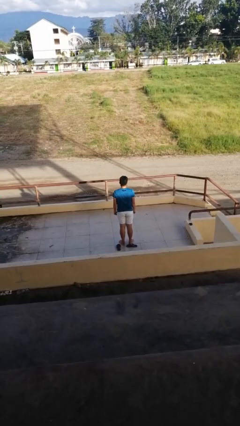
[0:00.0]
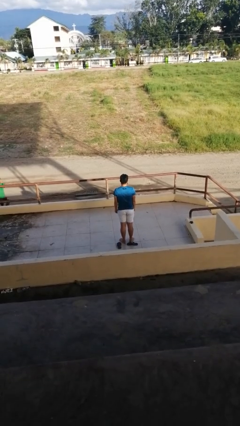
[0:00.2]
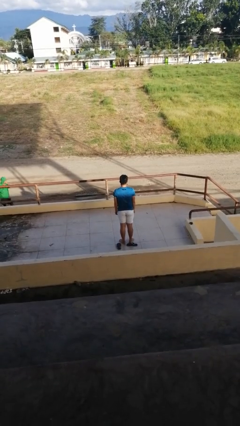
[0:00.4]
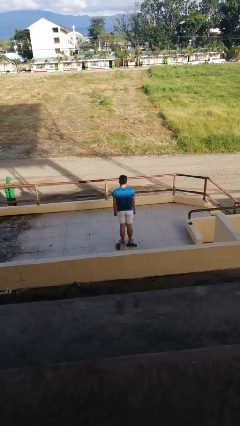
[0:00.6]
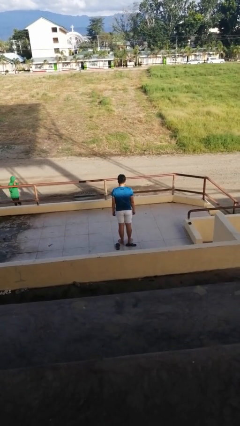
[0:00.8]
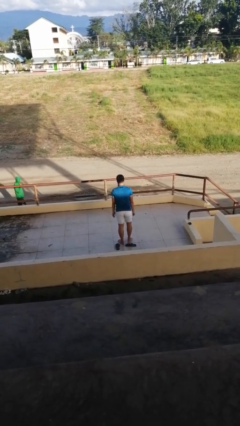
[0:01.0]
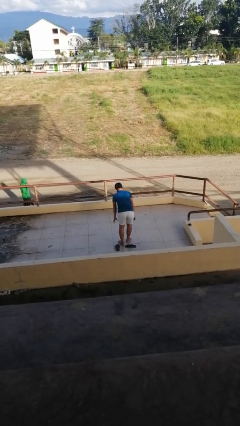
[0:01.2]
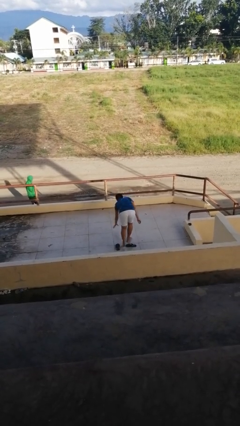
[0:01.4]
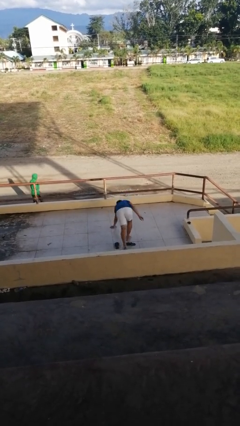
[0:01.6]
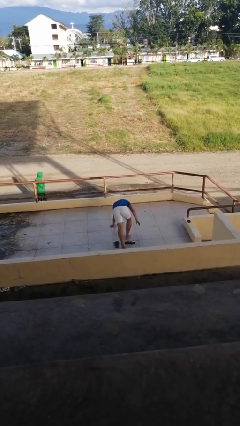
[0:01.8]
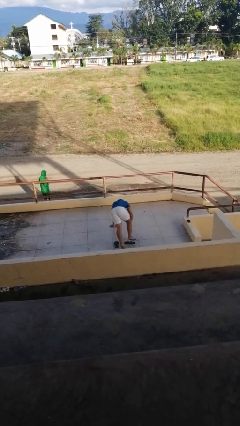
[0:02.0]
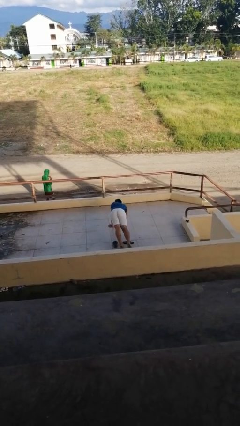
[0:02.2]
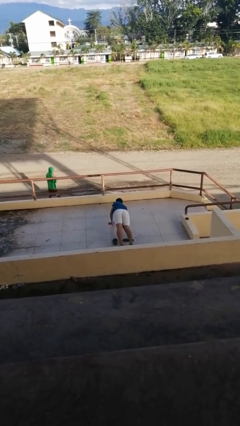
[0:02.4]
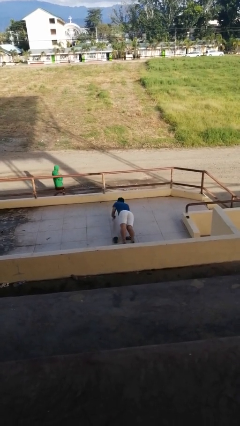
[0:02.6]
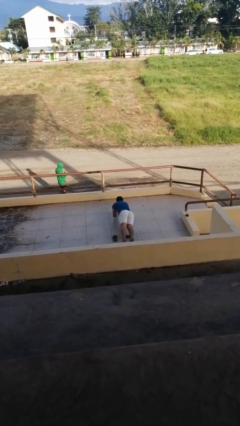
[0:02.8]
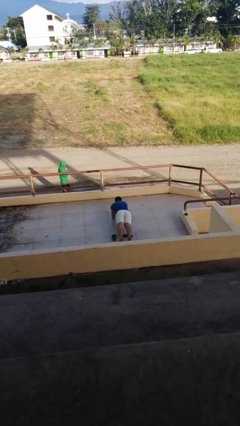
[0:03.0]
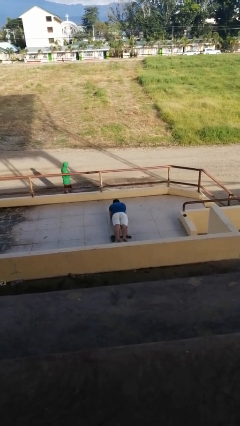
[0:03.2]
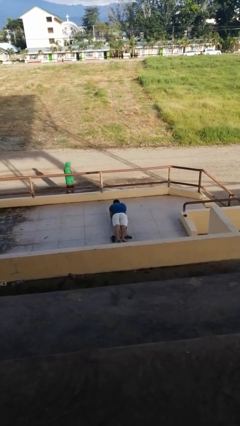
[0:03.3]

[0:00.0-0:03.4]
person exercises with plank

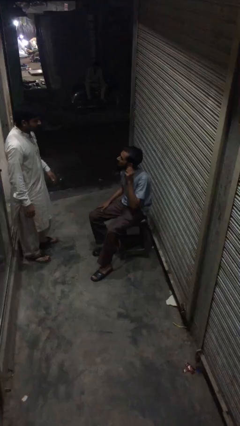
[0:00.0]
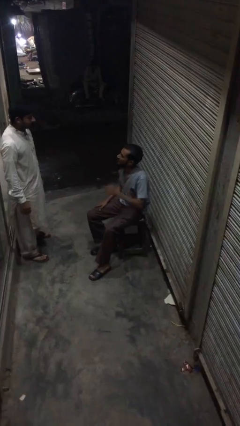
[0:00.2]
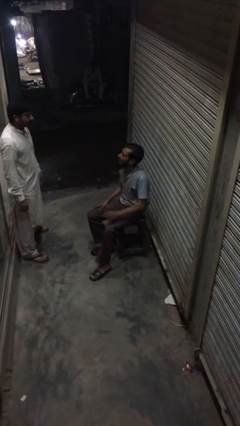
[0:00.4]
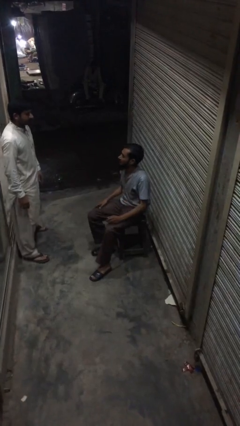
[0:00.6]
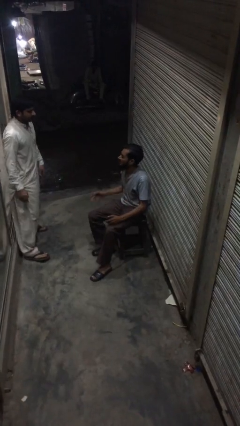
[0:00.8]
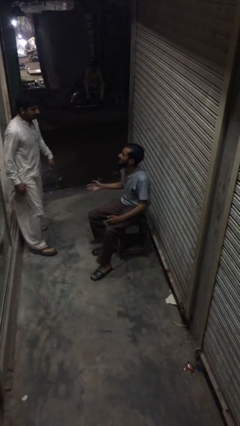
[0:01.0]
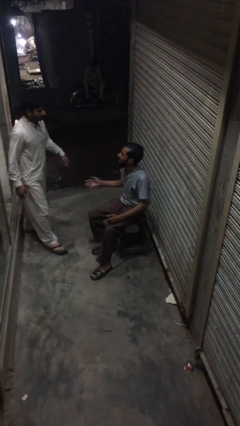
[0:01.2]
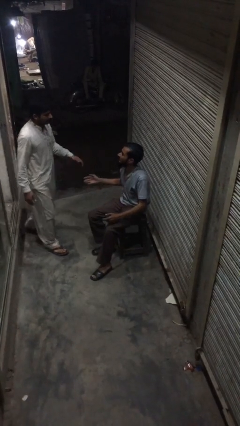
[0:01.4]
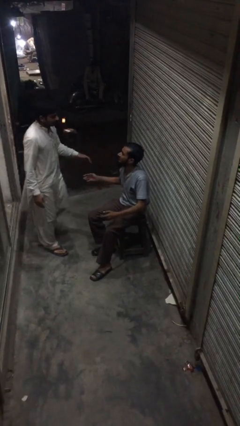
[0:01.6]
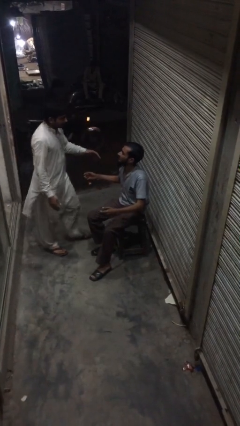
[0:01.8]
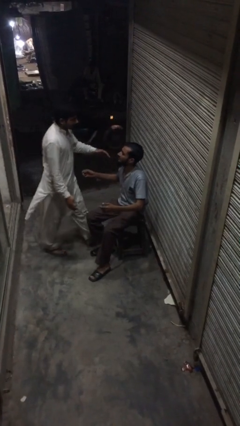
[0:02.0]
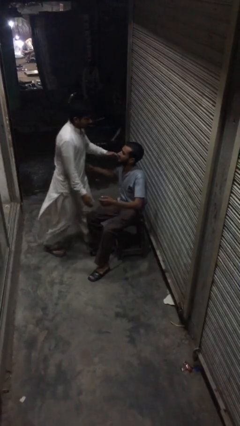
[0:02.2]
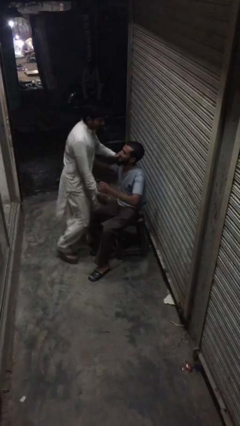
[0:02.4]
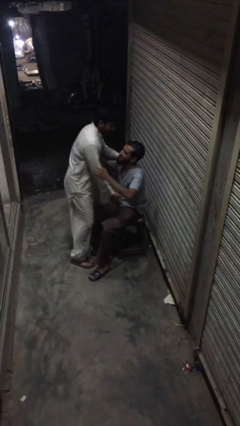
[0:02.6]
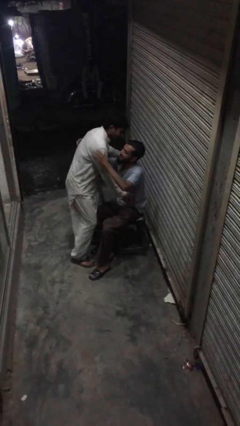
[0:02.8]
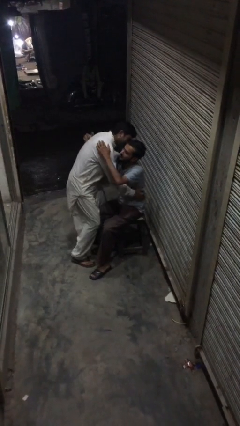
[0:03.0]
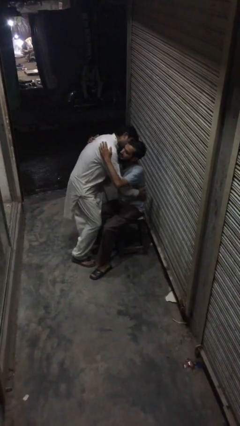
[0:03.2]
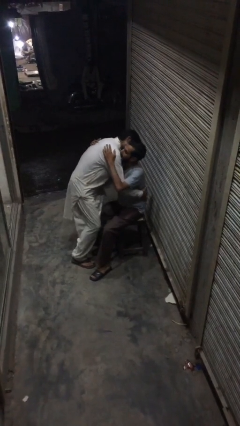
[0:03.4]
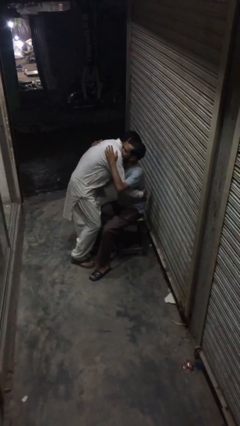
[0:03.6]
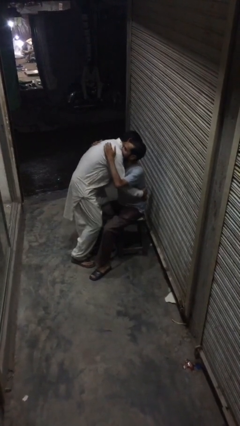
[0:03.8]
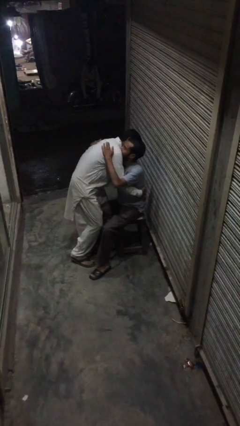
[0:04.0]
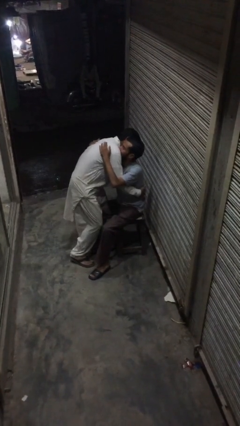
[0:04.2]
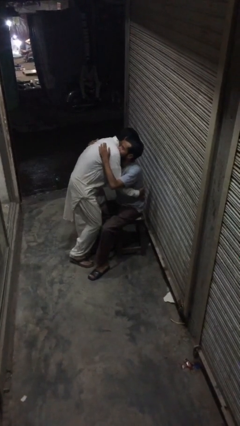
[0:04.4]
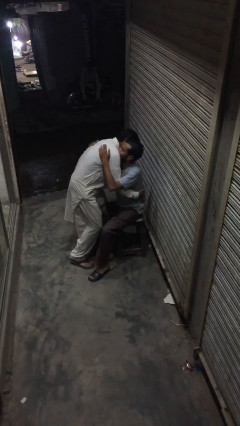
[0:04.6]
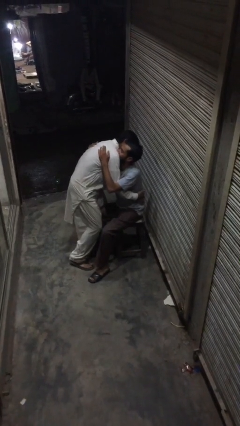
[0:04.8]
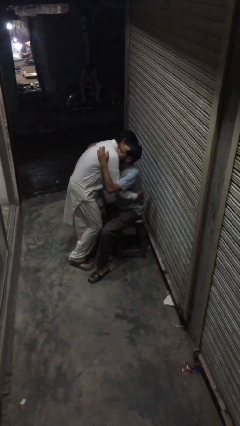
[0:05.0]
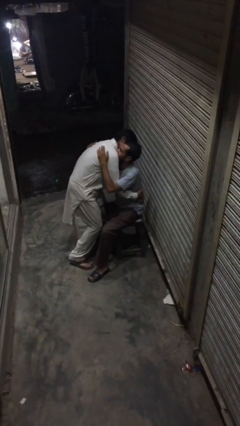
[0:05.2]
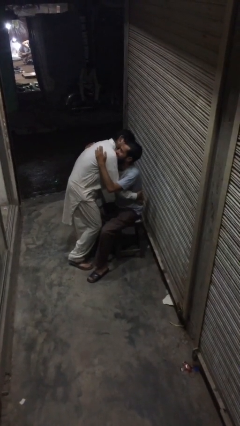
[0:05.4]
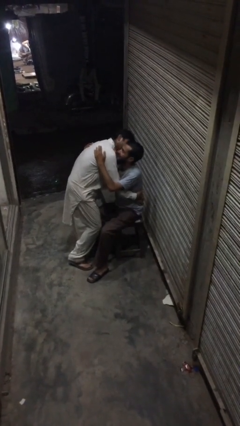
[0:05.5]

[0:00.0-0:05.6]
person embraces person

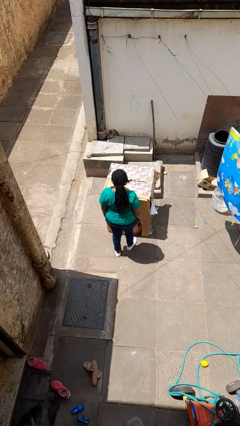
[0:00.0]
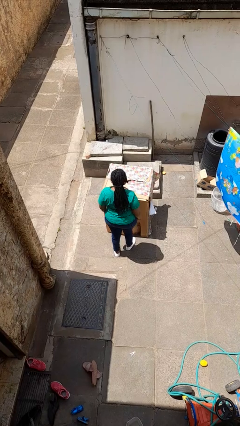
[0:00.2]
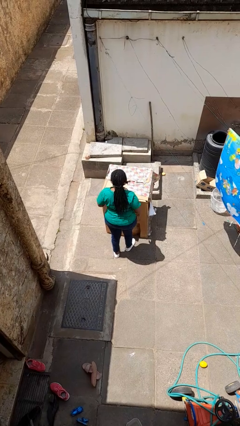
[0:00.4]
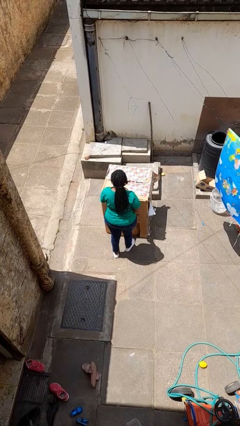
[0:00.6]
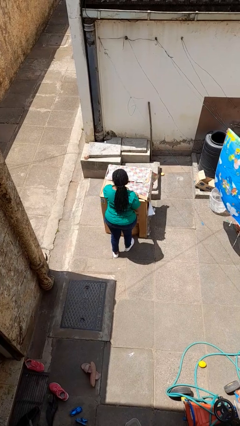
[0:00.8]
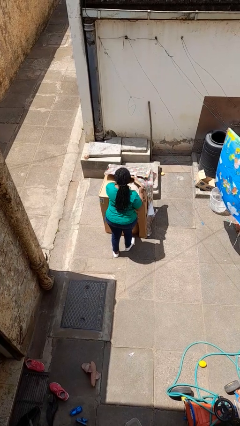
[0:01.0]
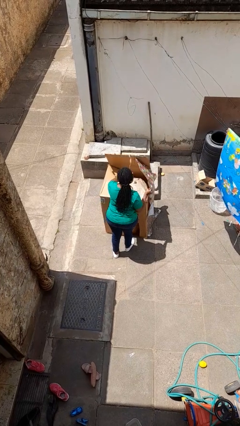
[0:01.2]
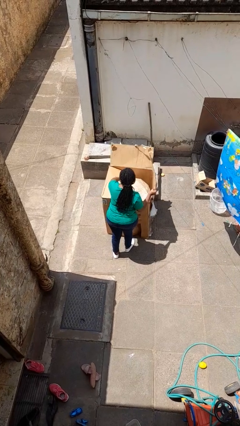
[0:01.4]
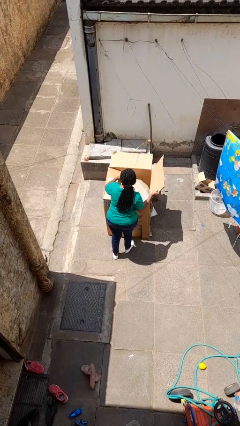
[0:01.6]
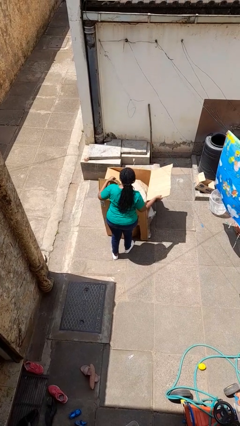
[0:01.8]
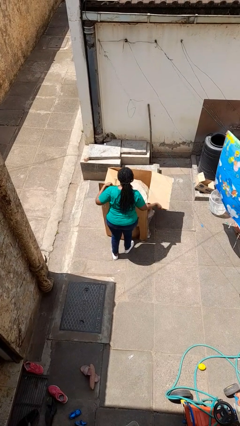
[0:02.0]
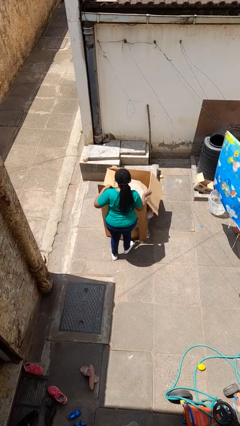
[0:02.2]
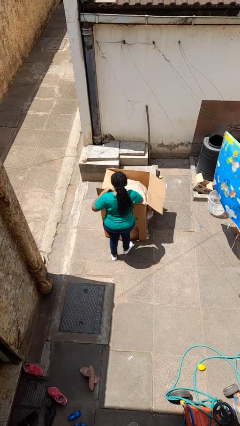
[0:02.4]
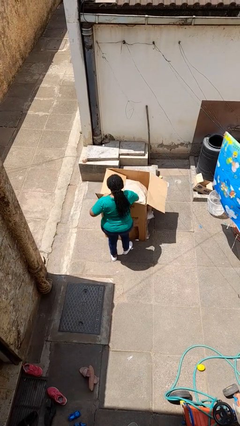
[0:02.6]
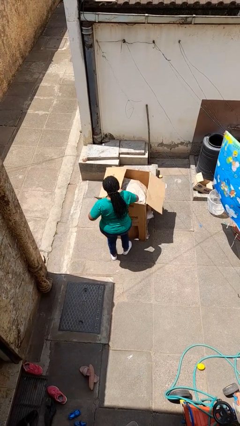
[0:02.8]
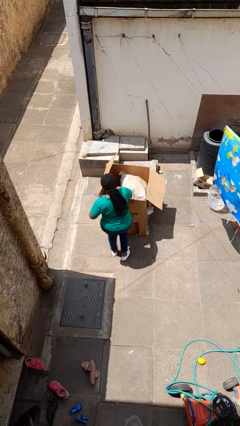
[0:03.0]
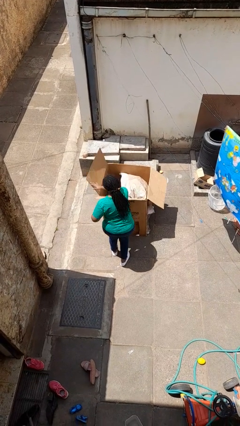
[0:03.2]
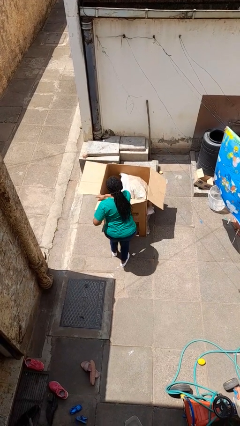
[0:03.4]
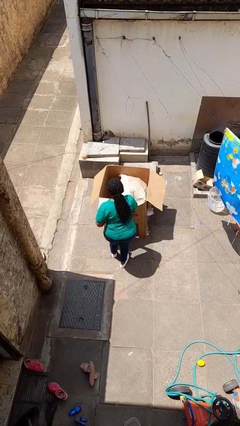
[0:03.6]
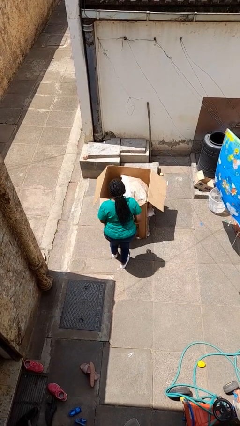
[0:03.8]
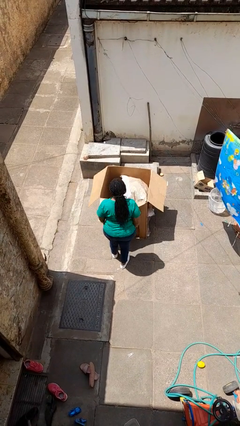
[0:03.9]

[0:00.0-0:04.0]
person opens box

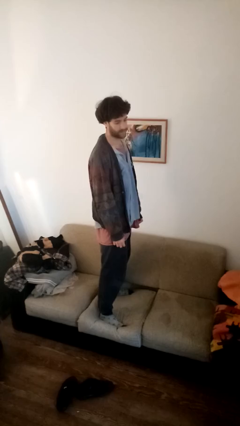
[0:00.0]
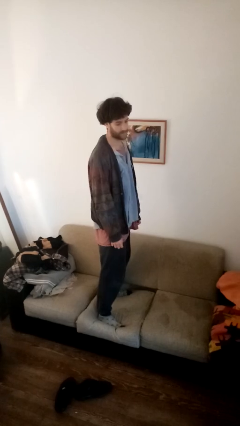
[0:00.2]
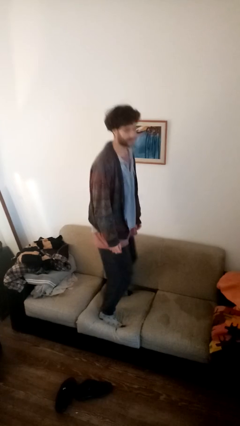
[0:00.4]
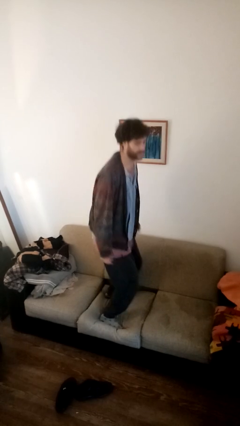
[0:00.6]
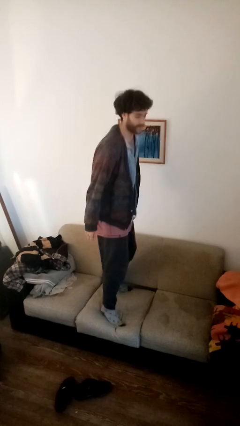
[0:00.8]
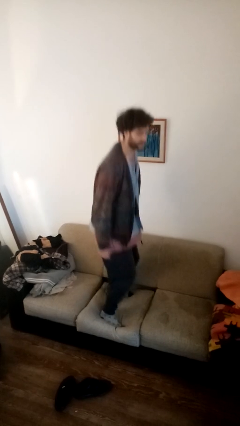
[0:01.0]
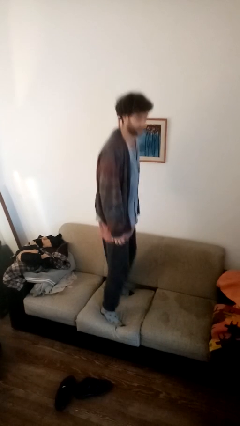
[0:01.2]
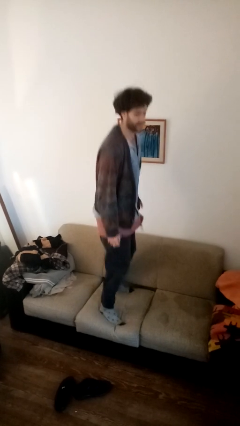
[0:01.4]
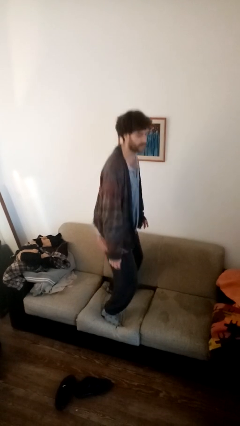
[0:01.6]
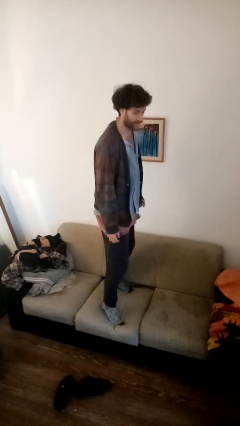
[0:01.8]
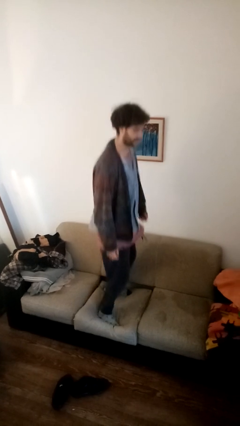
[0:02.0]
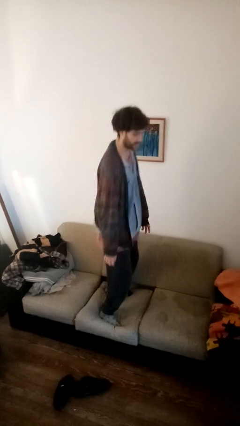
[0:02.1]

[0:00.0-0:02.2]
person jumps on couch

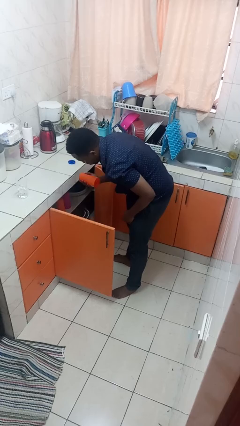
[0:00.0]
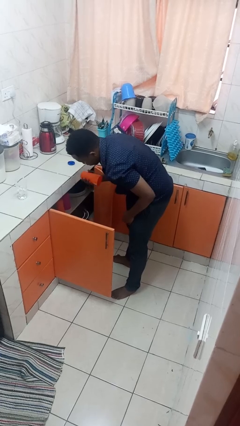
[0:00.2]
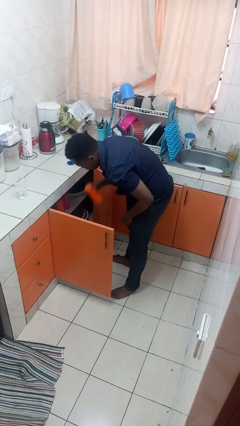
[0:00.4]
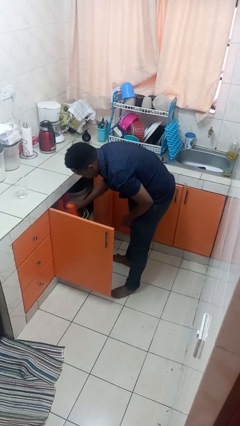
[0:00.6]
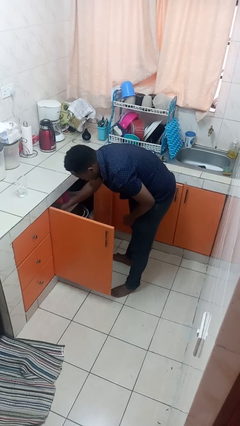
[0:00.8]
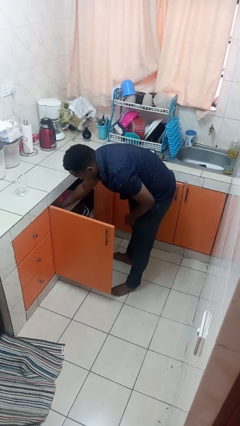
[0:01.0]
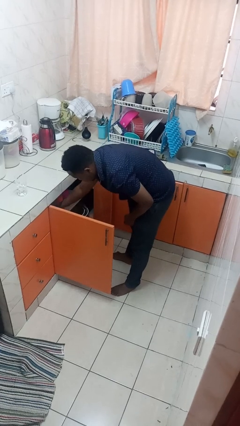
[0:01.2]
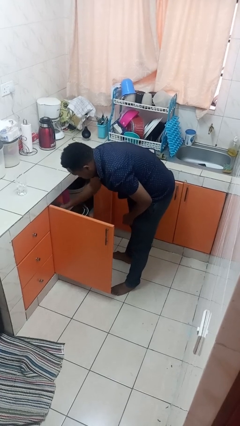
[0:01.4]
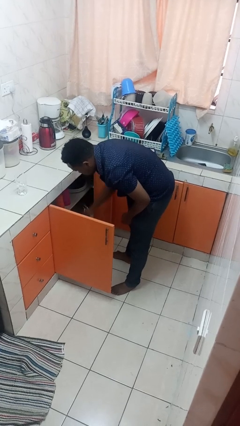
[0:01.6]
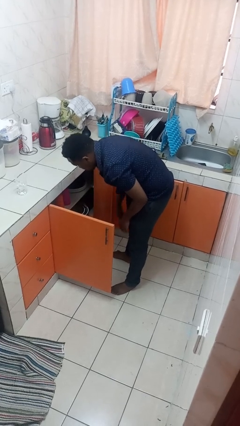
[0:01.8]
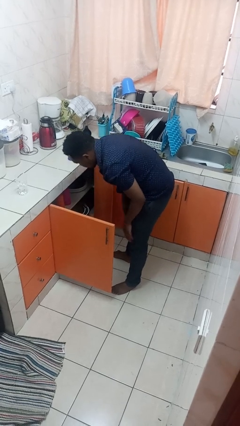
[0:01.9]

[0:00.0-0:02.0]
person puts object in cabinet

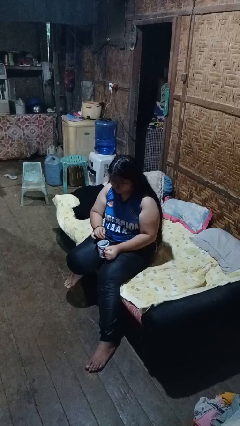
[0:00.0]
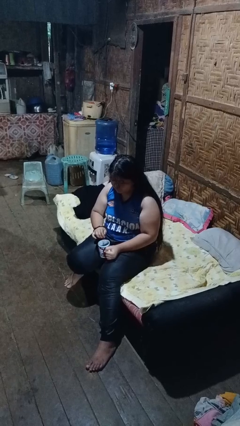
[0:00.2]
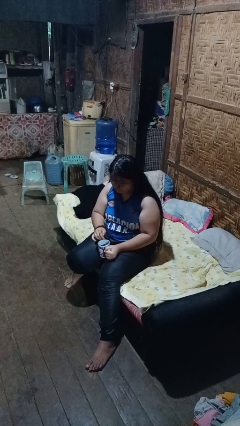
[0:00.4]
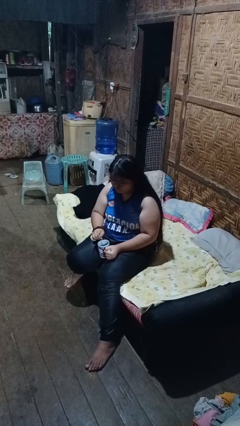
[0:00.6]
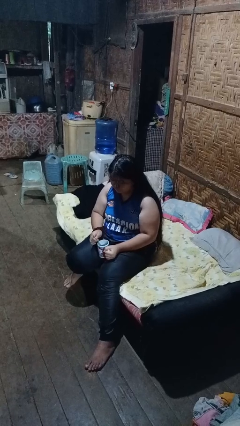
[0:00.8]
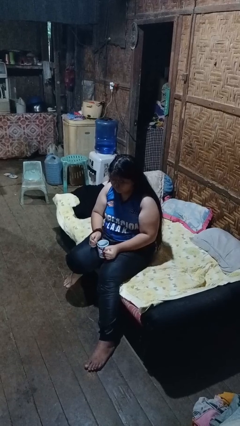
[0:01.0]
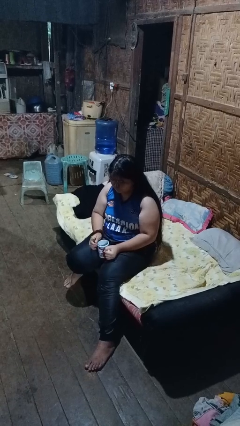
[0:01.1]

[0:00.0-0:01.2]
person stirs mug
